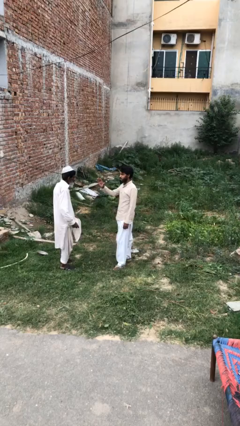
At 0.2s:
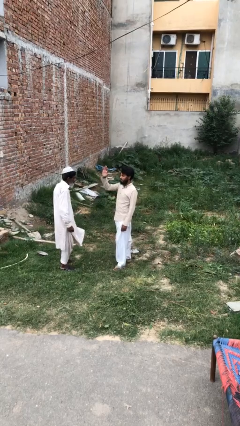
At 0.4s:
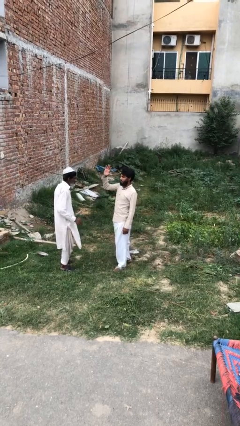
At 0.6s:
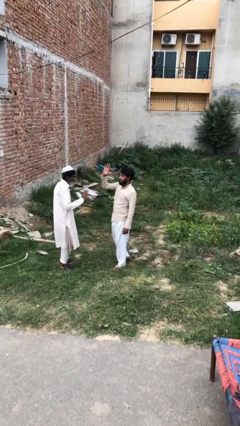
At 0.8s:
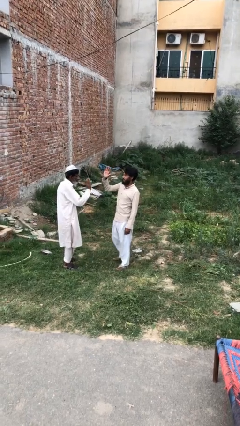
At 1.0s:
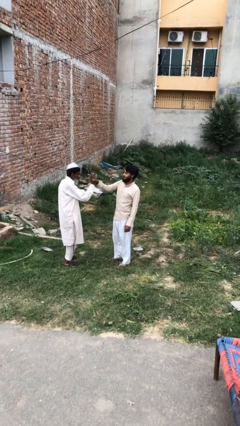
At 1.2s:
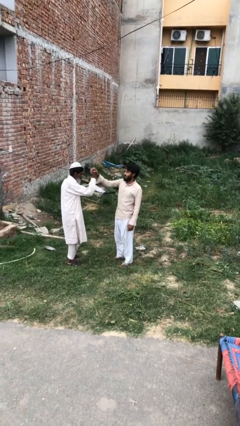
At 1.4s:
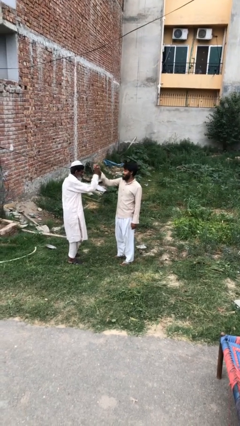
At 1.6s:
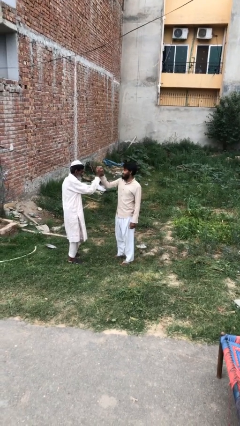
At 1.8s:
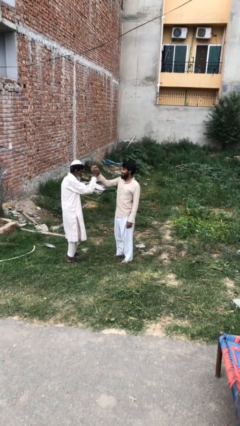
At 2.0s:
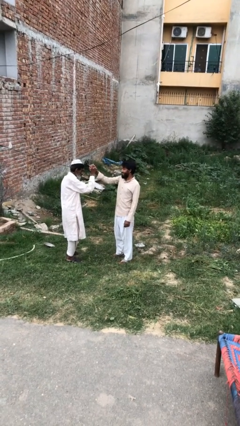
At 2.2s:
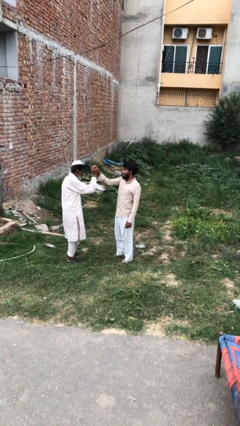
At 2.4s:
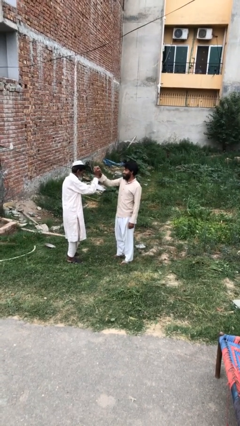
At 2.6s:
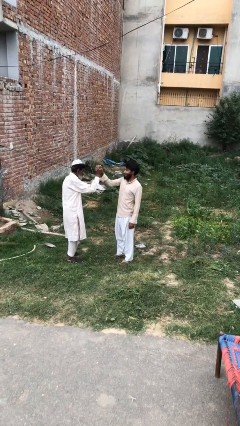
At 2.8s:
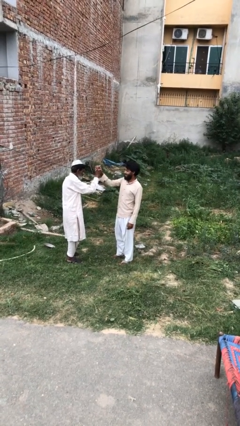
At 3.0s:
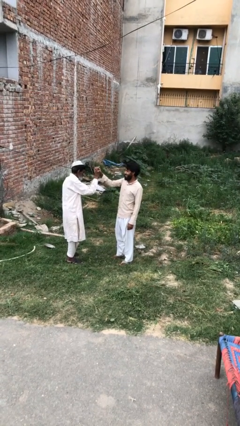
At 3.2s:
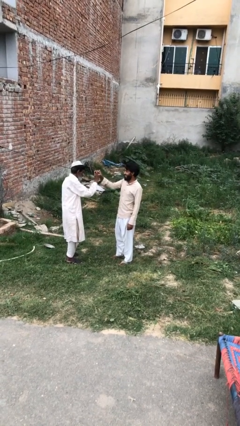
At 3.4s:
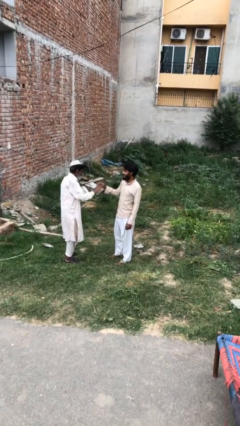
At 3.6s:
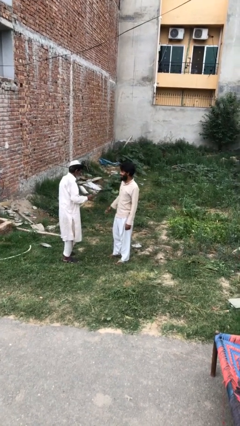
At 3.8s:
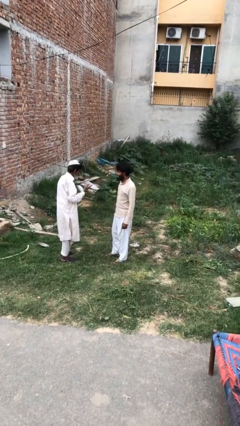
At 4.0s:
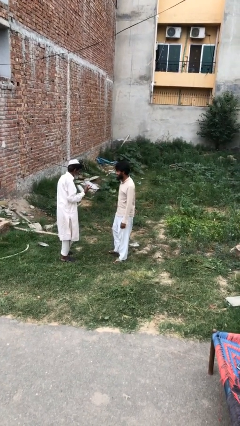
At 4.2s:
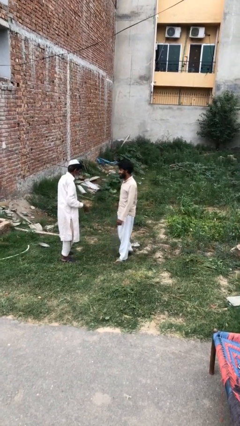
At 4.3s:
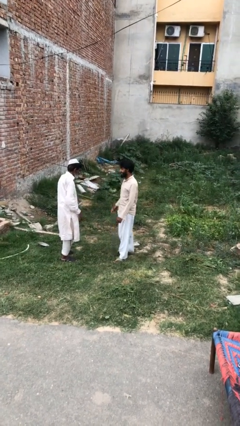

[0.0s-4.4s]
person highfives hand

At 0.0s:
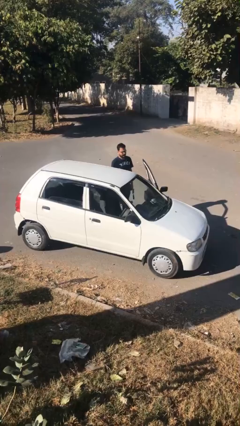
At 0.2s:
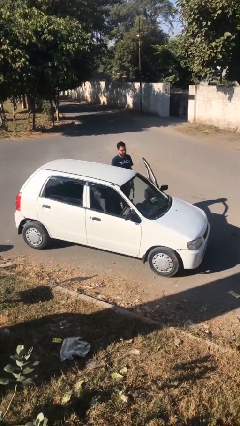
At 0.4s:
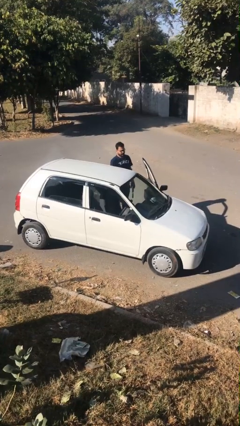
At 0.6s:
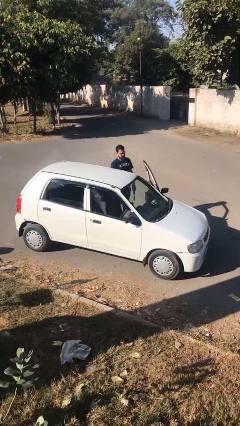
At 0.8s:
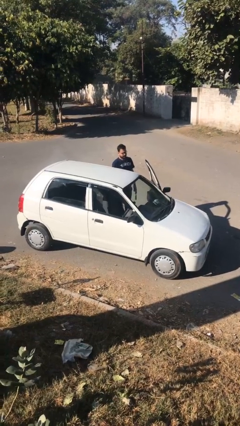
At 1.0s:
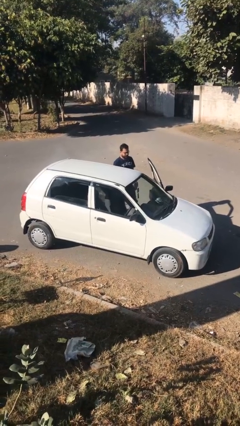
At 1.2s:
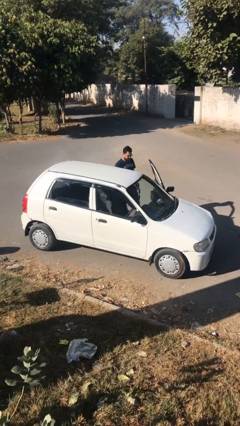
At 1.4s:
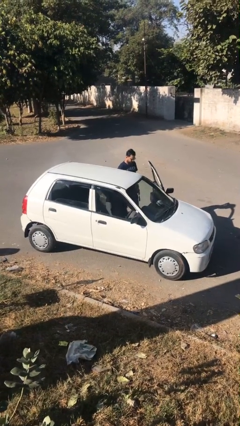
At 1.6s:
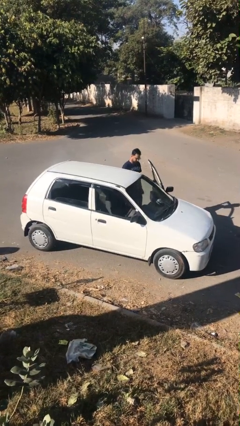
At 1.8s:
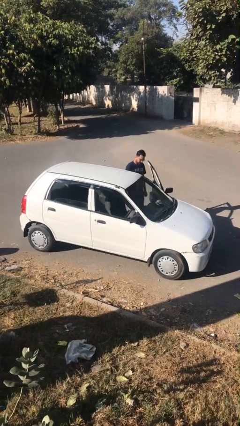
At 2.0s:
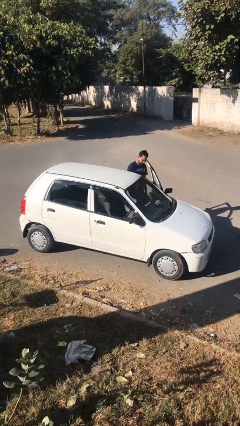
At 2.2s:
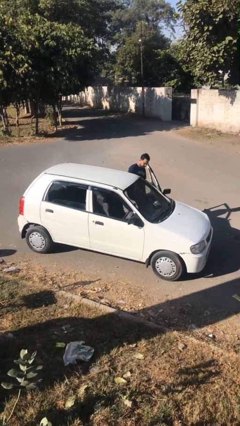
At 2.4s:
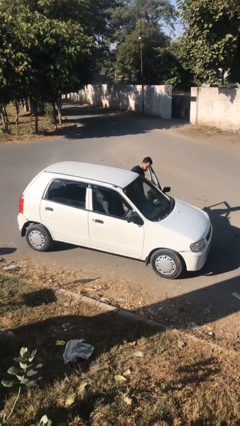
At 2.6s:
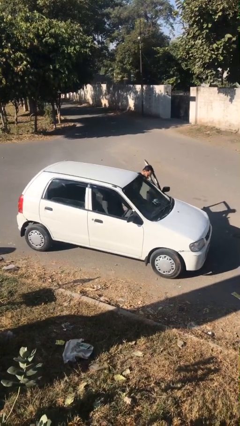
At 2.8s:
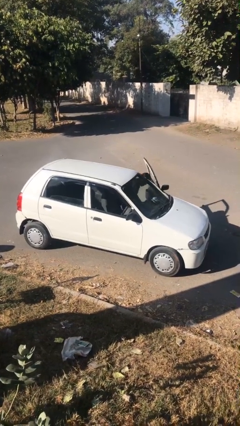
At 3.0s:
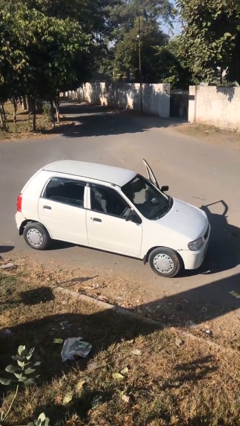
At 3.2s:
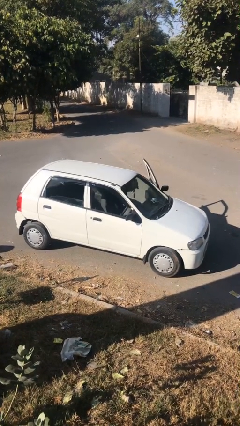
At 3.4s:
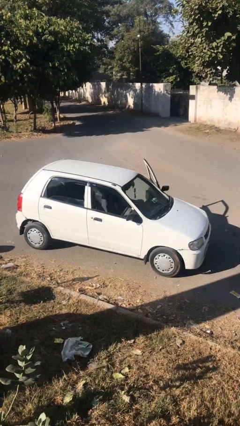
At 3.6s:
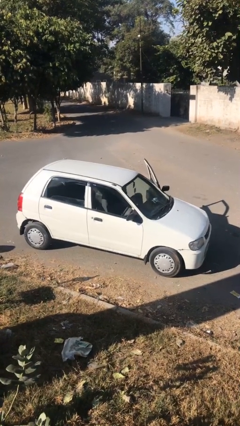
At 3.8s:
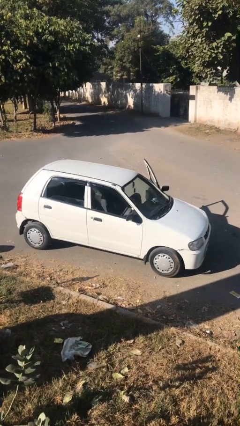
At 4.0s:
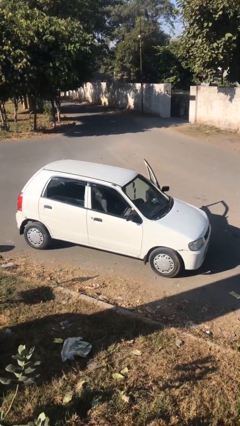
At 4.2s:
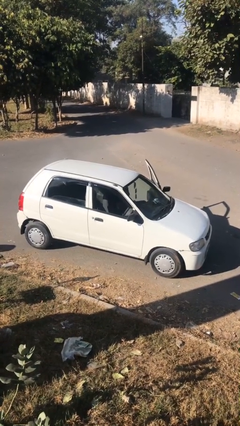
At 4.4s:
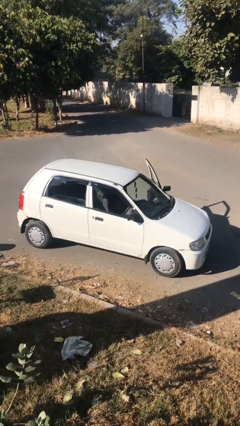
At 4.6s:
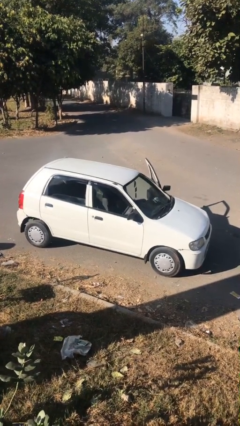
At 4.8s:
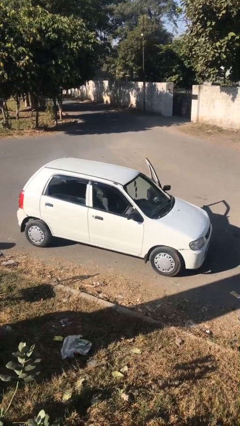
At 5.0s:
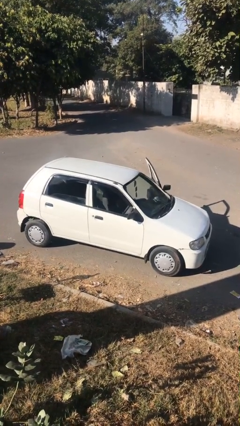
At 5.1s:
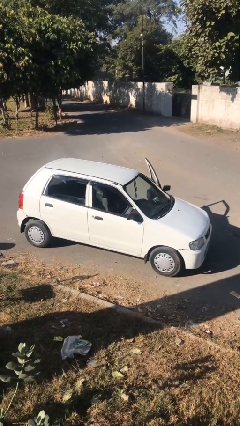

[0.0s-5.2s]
car picks up person

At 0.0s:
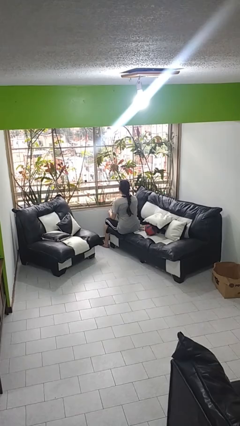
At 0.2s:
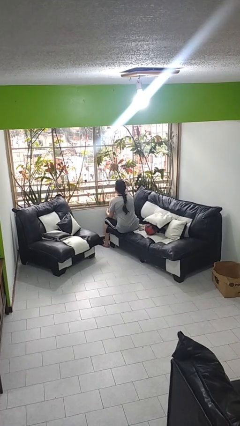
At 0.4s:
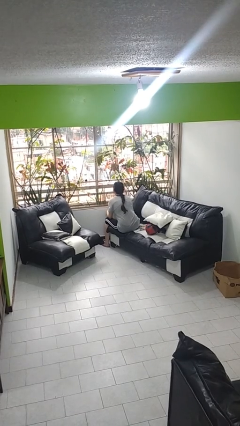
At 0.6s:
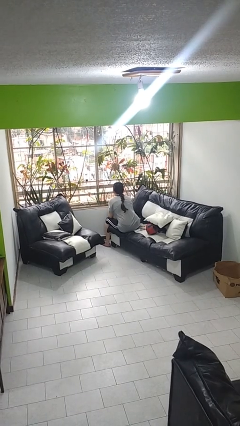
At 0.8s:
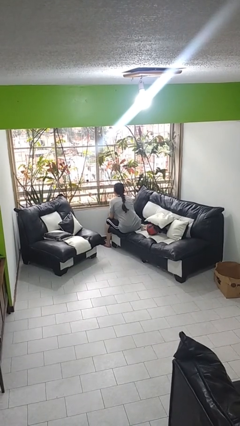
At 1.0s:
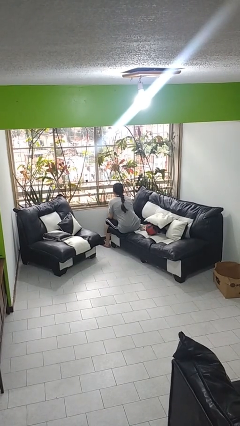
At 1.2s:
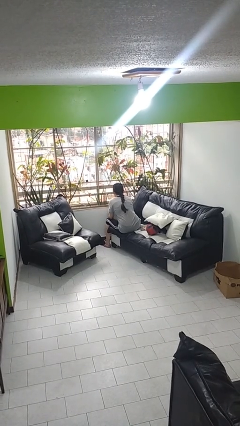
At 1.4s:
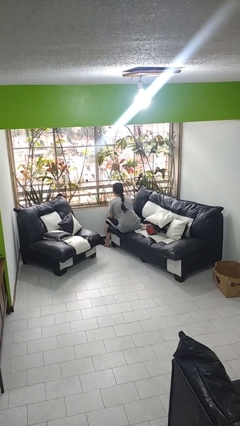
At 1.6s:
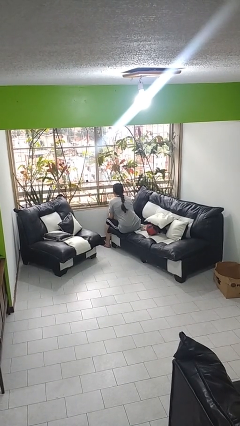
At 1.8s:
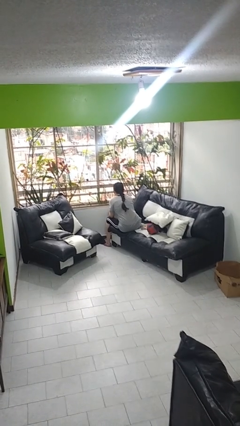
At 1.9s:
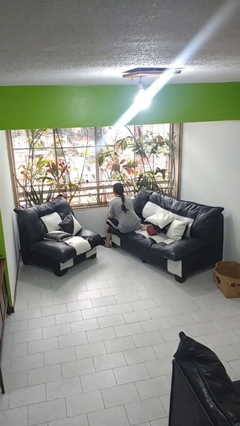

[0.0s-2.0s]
person looks at hands in lap

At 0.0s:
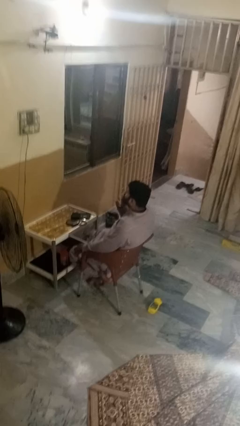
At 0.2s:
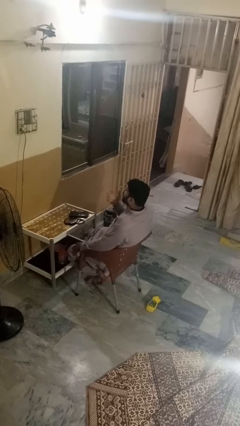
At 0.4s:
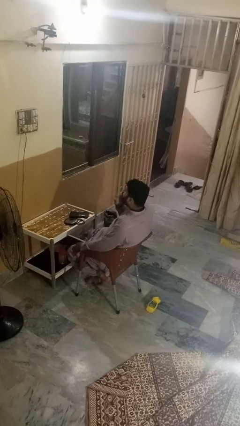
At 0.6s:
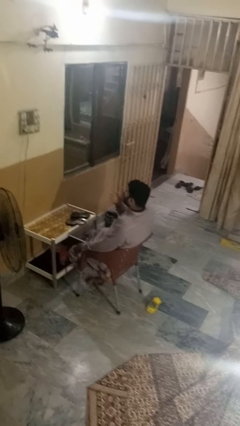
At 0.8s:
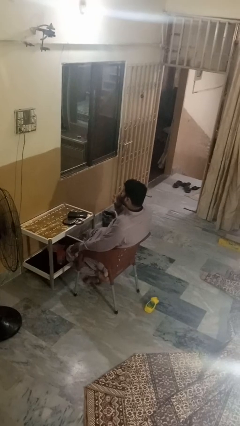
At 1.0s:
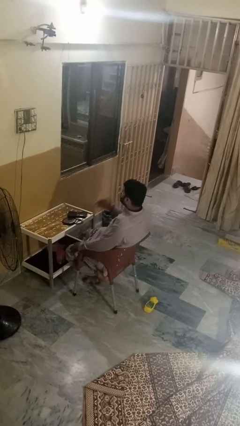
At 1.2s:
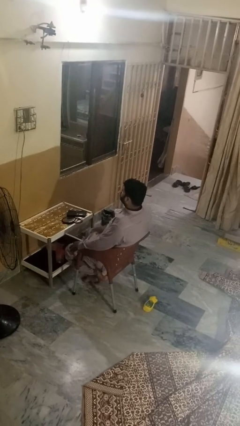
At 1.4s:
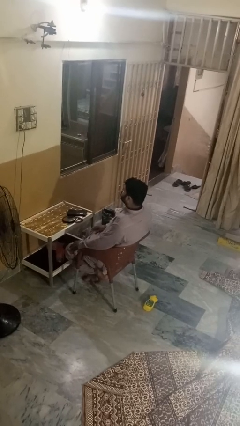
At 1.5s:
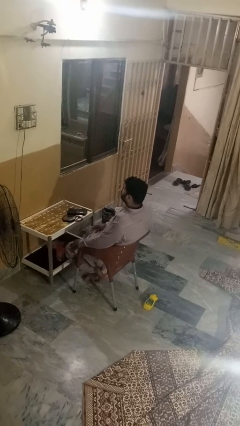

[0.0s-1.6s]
person licks fingers

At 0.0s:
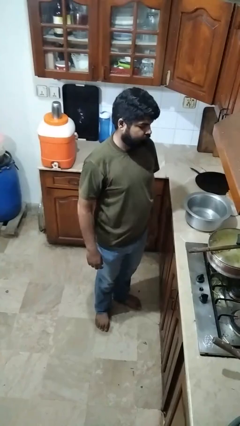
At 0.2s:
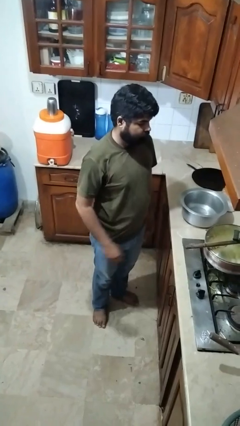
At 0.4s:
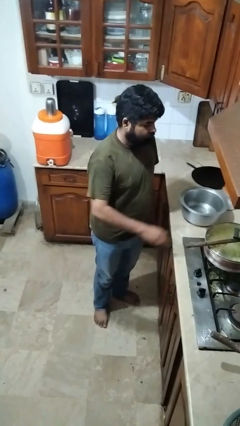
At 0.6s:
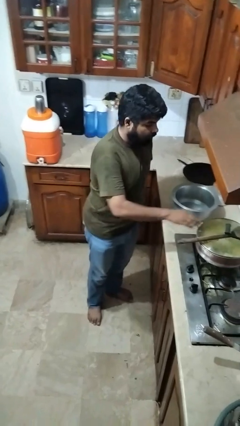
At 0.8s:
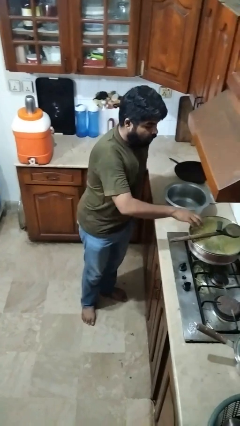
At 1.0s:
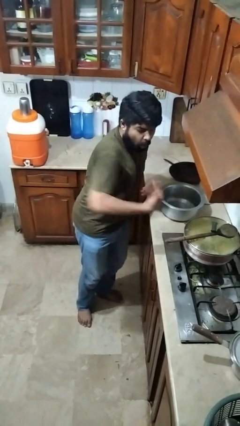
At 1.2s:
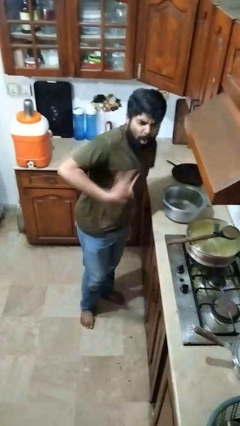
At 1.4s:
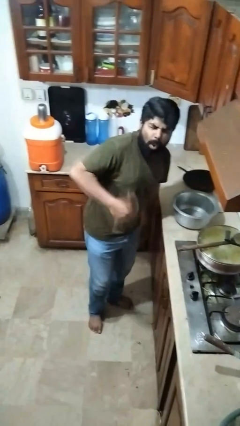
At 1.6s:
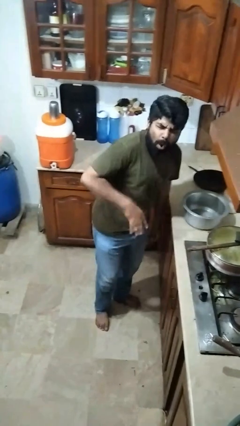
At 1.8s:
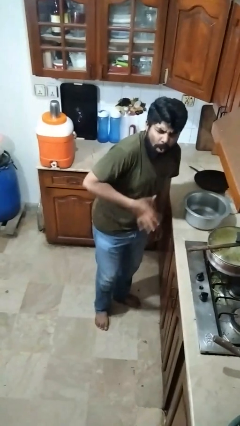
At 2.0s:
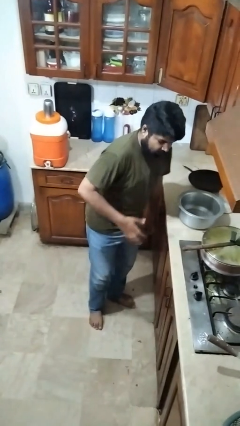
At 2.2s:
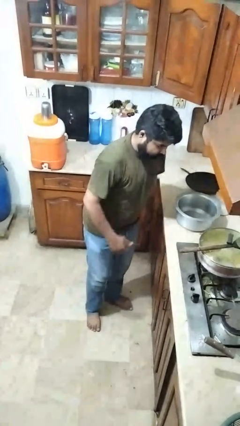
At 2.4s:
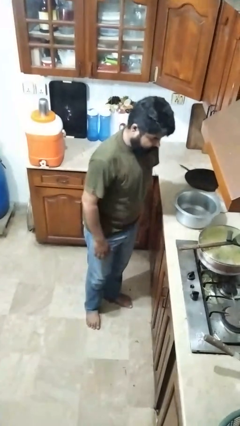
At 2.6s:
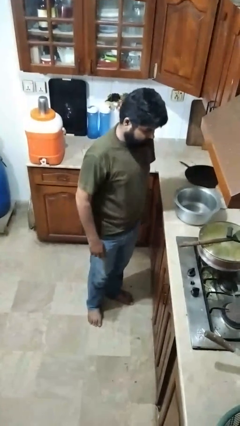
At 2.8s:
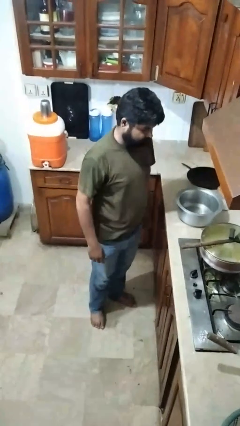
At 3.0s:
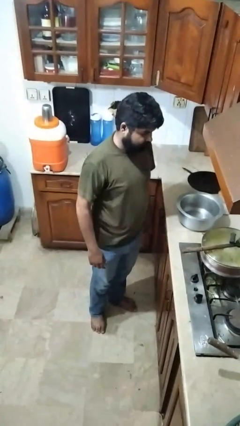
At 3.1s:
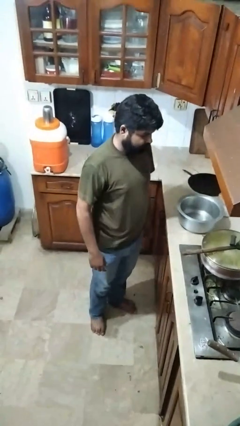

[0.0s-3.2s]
person burns hand

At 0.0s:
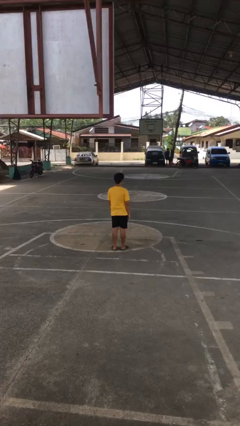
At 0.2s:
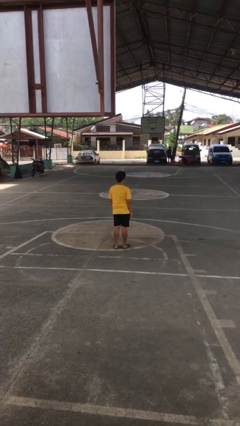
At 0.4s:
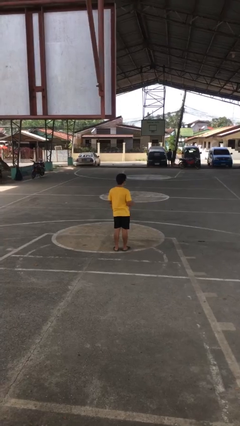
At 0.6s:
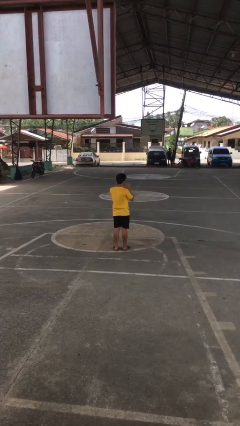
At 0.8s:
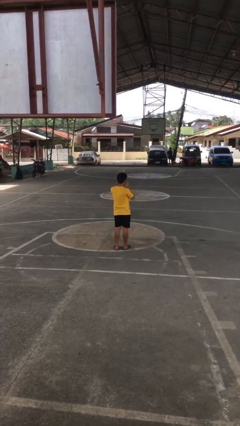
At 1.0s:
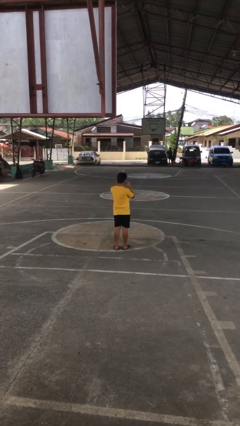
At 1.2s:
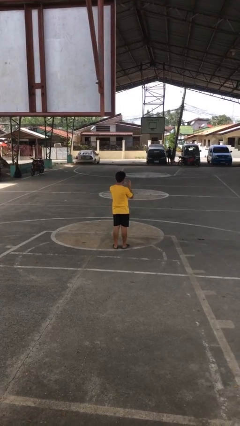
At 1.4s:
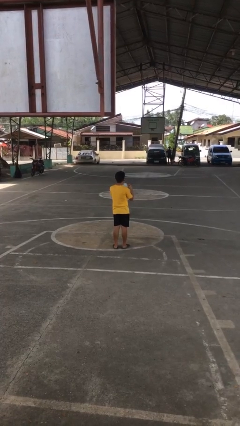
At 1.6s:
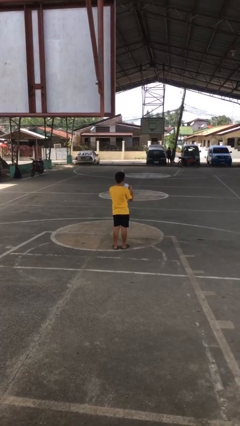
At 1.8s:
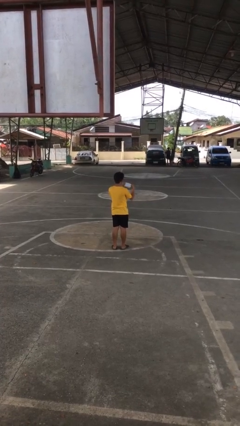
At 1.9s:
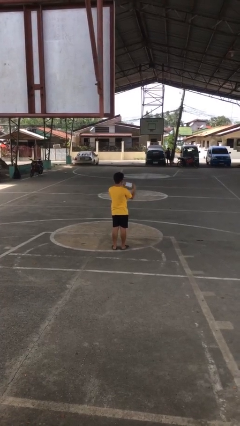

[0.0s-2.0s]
person takes off facemask
